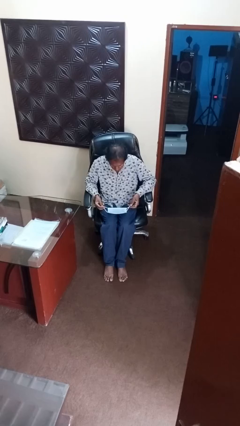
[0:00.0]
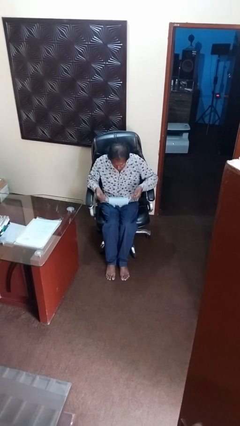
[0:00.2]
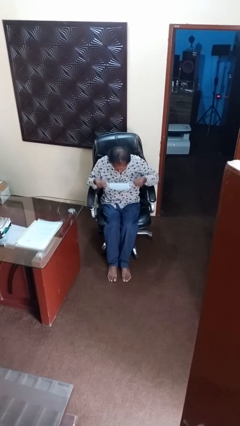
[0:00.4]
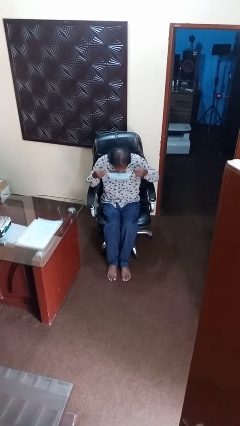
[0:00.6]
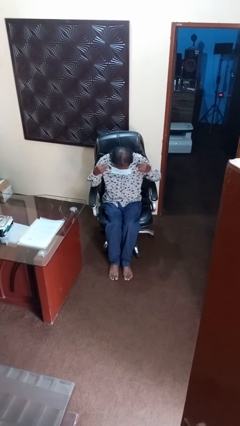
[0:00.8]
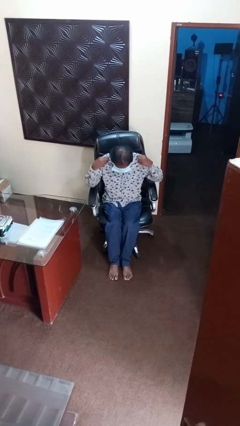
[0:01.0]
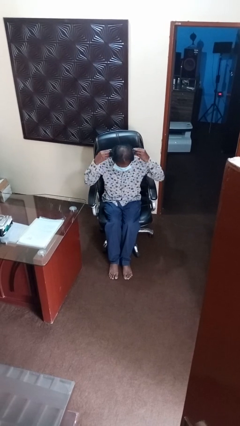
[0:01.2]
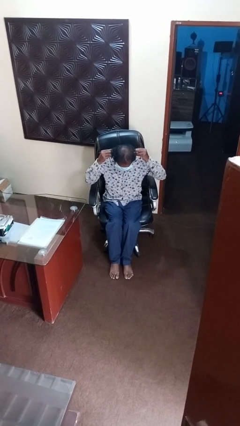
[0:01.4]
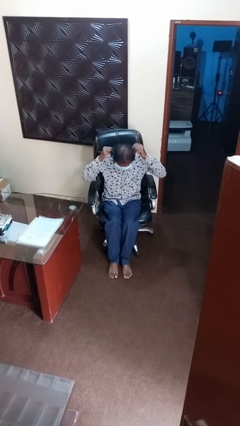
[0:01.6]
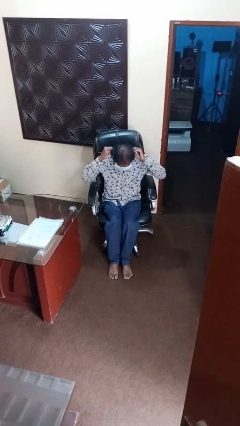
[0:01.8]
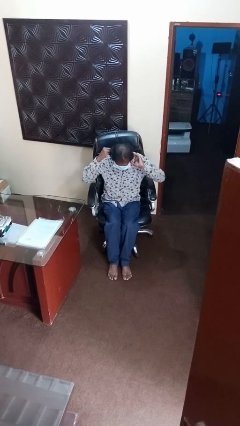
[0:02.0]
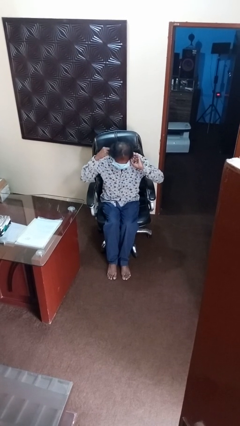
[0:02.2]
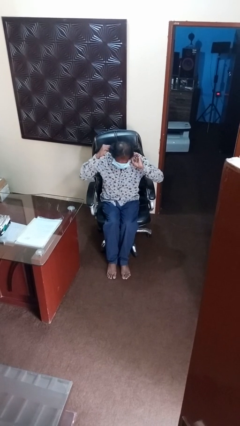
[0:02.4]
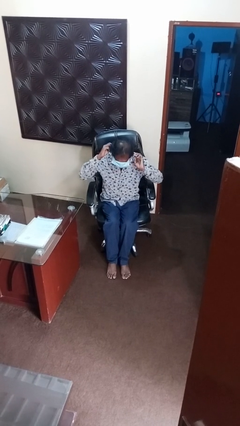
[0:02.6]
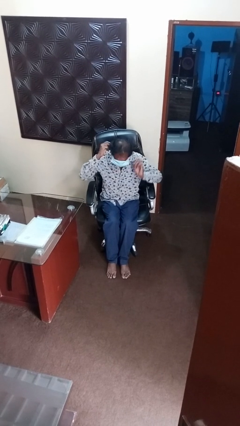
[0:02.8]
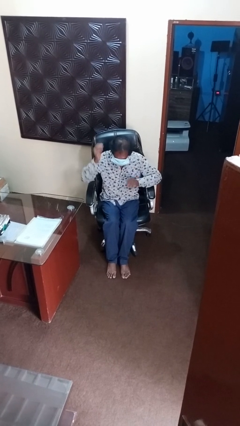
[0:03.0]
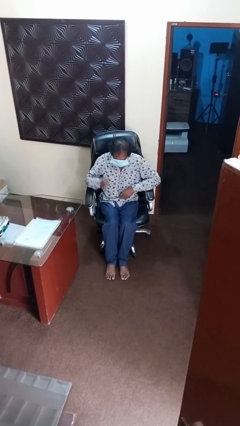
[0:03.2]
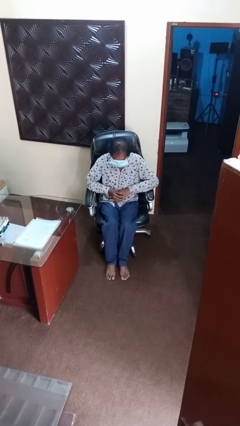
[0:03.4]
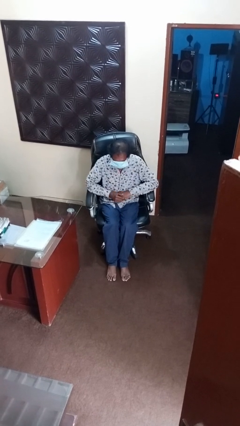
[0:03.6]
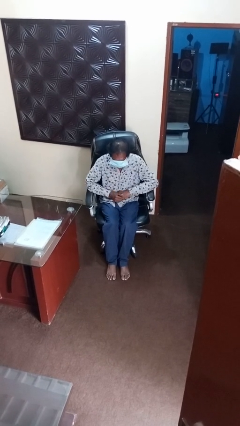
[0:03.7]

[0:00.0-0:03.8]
person puts on facemask

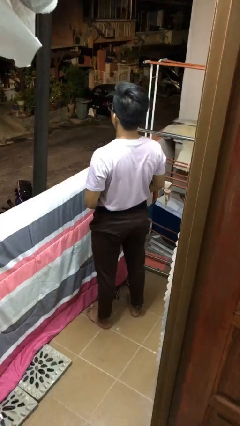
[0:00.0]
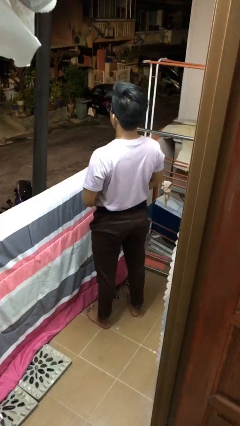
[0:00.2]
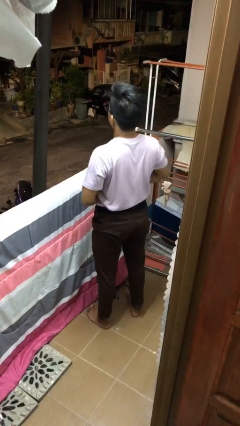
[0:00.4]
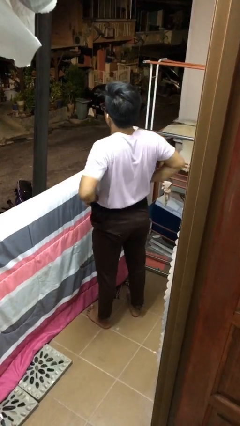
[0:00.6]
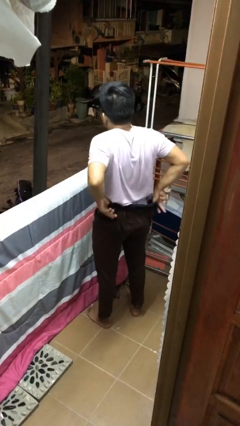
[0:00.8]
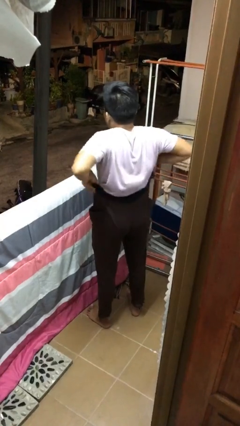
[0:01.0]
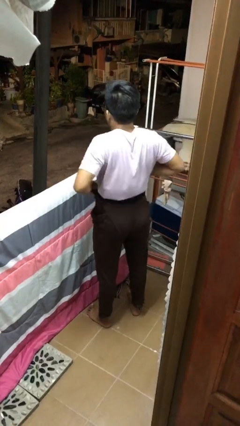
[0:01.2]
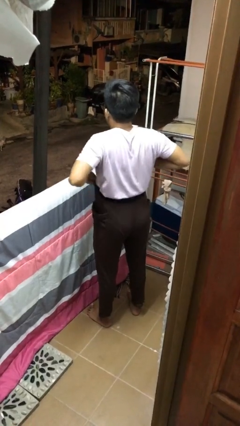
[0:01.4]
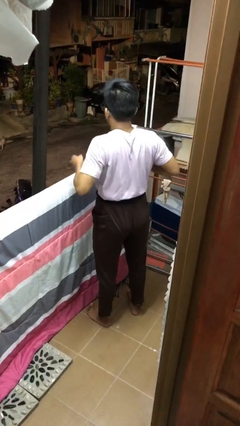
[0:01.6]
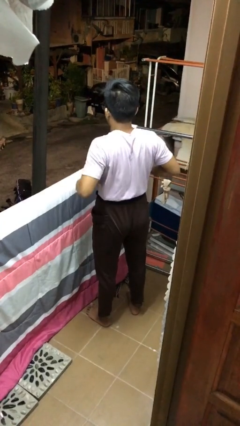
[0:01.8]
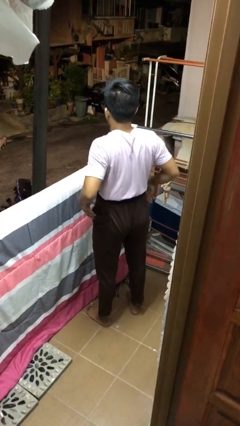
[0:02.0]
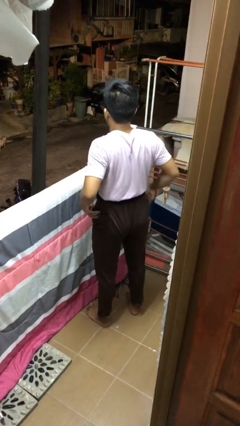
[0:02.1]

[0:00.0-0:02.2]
person hikes up pants

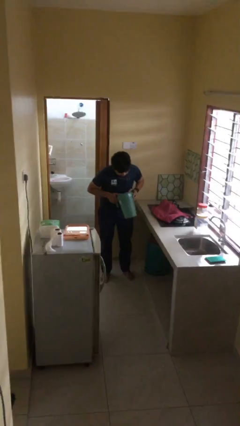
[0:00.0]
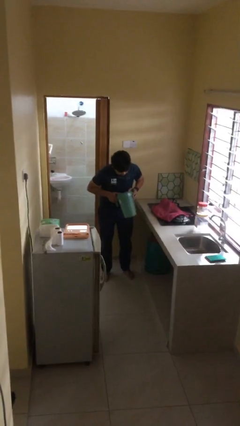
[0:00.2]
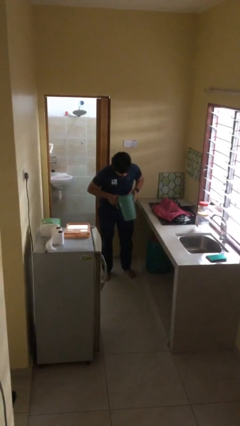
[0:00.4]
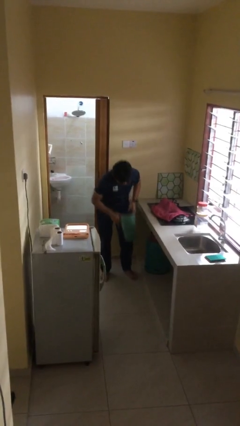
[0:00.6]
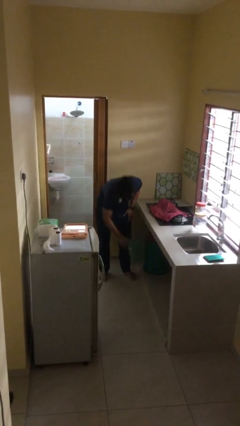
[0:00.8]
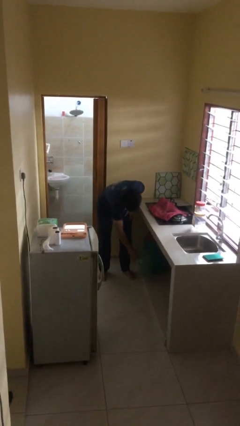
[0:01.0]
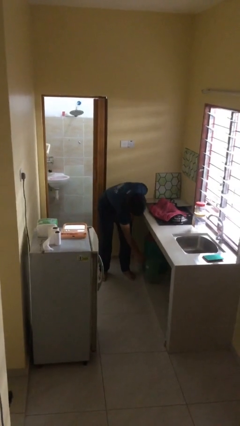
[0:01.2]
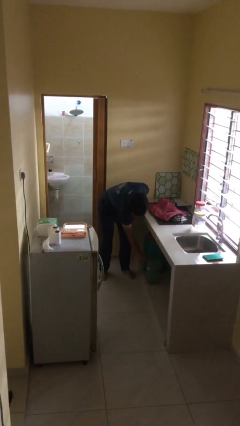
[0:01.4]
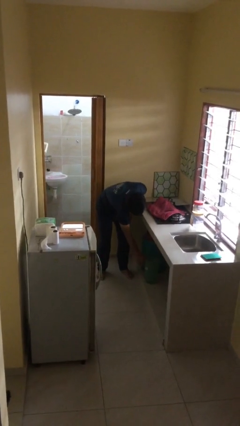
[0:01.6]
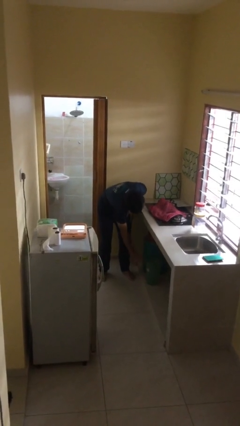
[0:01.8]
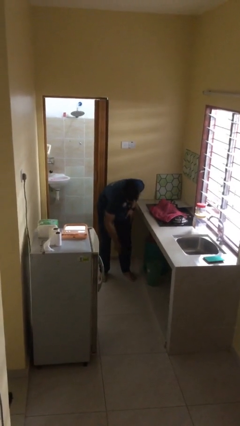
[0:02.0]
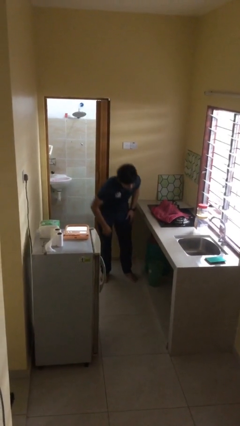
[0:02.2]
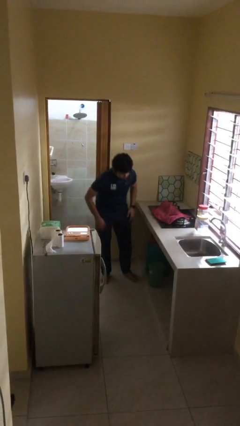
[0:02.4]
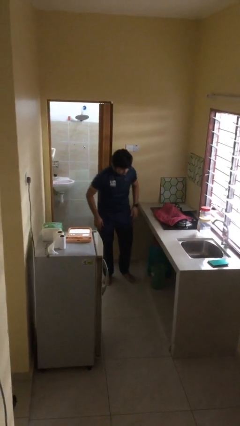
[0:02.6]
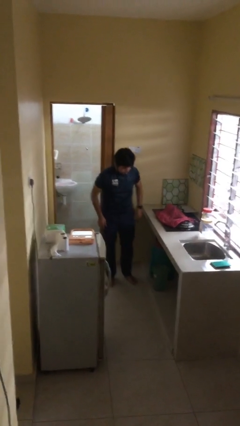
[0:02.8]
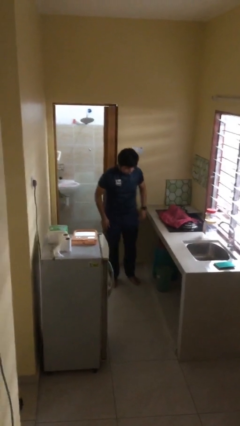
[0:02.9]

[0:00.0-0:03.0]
person puts down object into cabinet

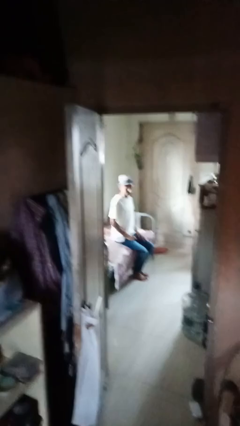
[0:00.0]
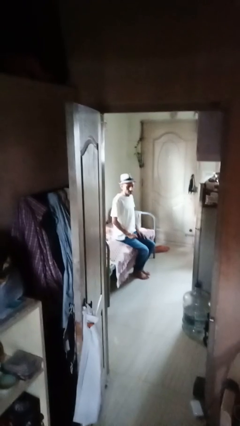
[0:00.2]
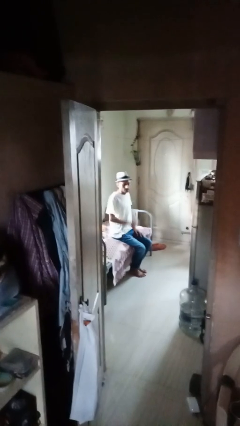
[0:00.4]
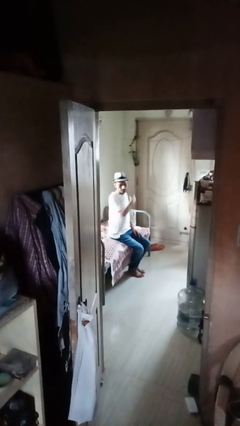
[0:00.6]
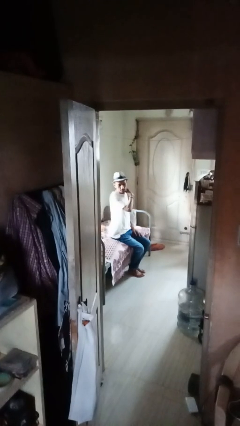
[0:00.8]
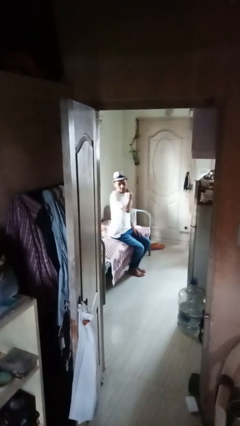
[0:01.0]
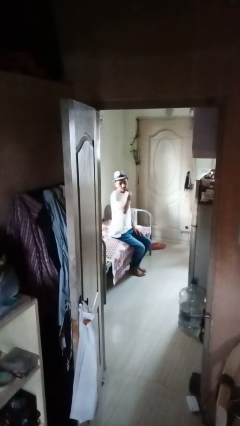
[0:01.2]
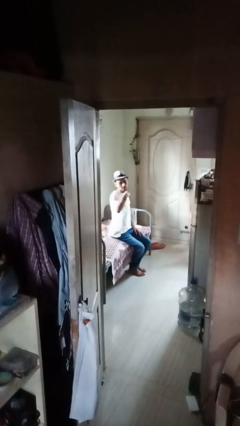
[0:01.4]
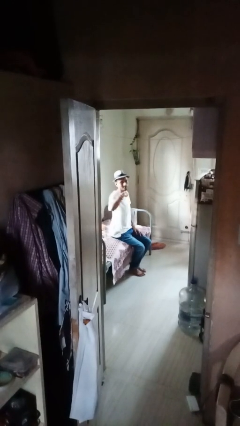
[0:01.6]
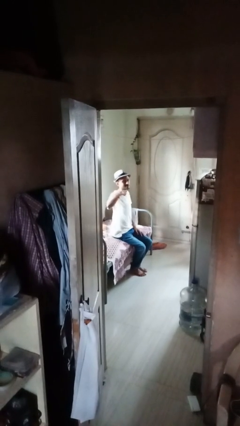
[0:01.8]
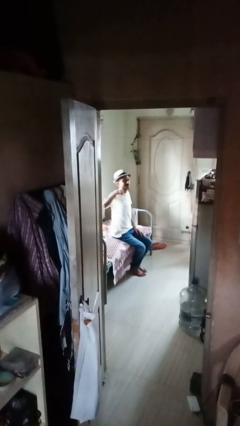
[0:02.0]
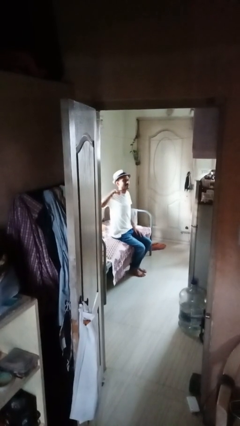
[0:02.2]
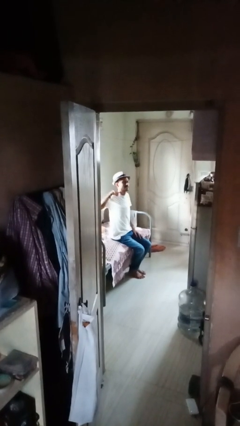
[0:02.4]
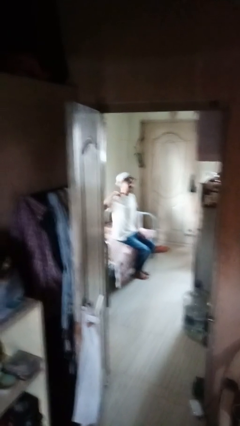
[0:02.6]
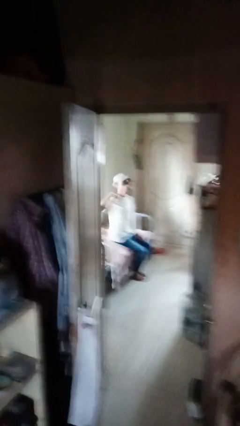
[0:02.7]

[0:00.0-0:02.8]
person gestures cut

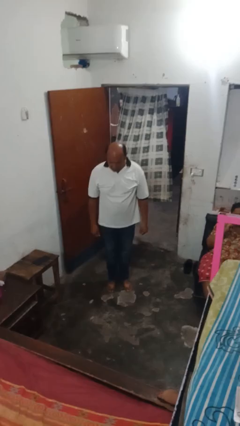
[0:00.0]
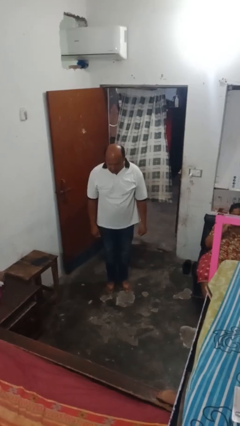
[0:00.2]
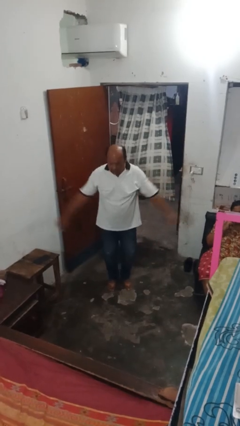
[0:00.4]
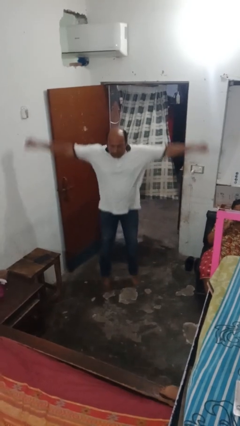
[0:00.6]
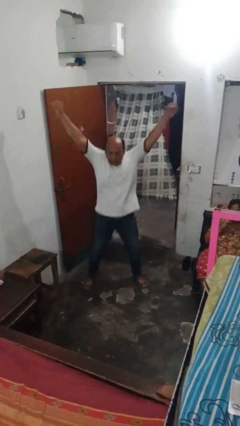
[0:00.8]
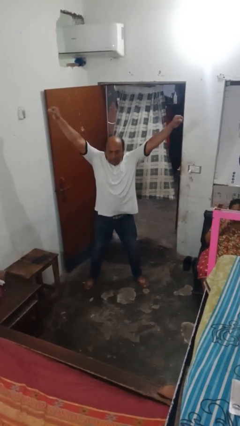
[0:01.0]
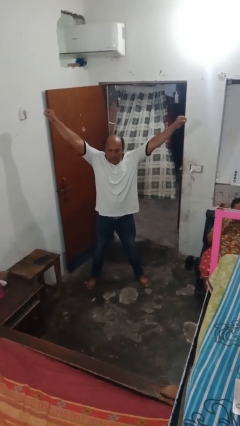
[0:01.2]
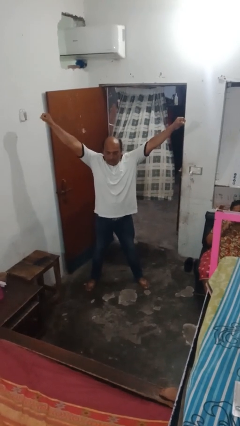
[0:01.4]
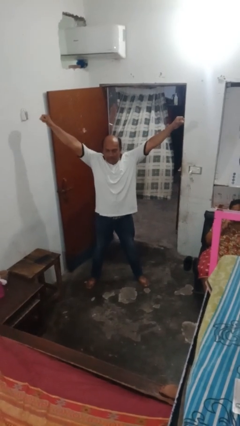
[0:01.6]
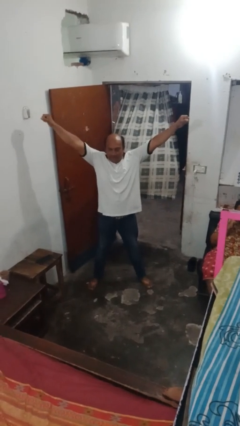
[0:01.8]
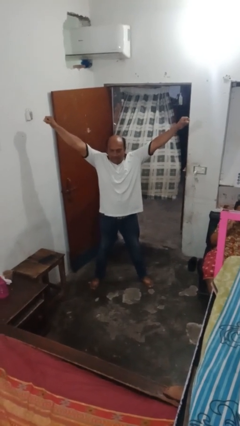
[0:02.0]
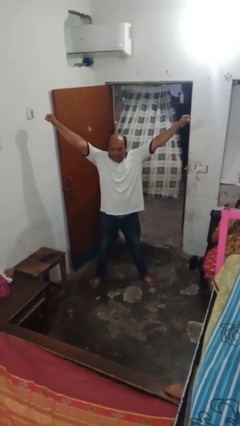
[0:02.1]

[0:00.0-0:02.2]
person exercises with jumping jacks

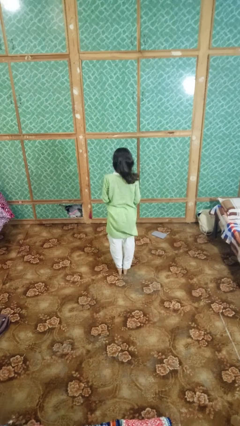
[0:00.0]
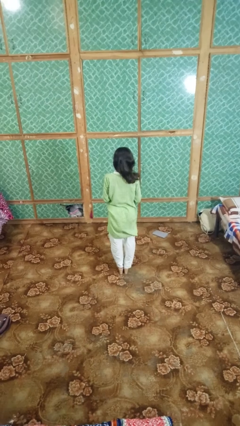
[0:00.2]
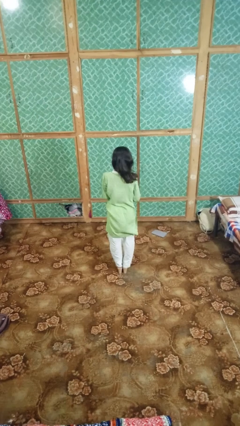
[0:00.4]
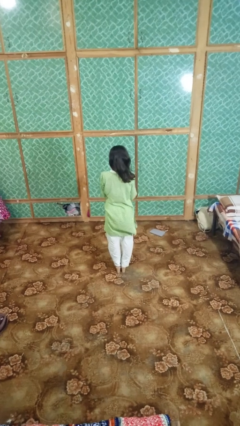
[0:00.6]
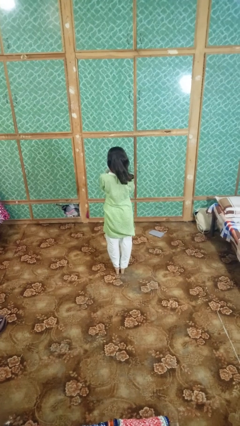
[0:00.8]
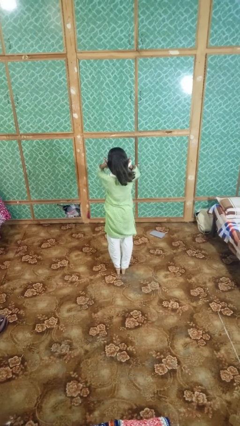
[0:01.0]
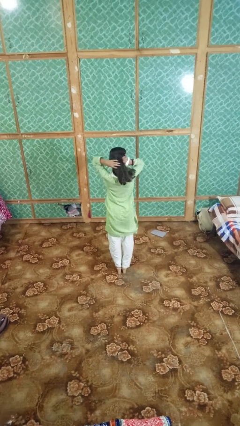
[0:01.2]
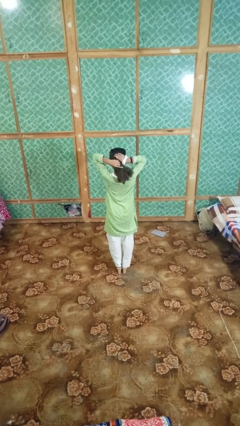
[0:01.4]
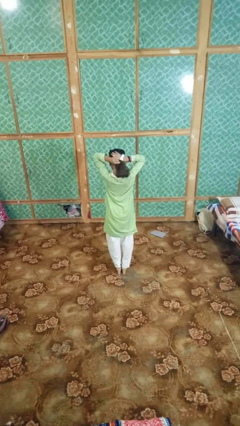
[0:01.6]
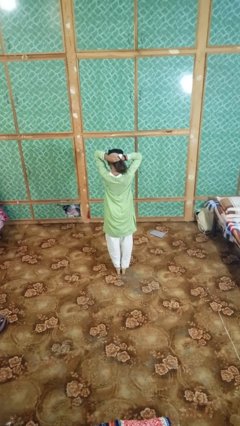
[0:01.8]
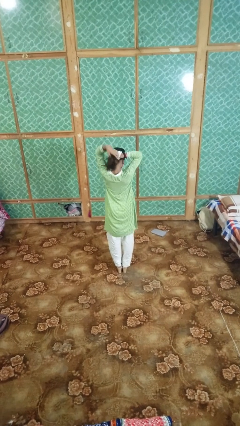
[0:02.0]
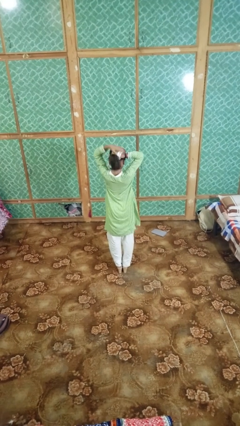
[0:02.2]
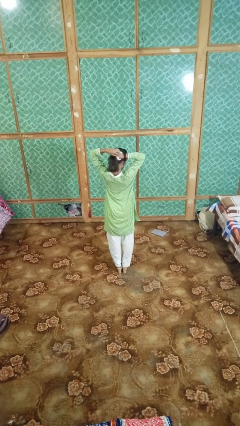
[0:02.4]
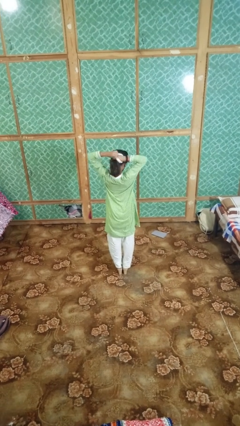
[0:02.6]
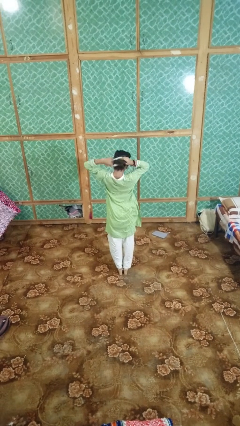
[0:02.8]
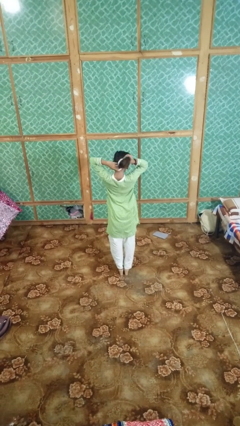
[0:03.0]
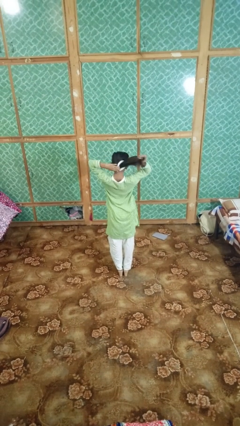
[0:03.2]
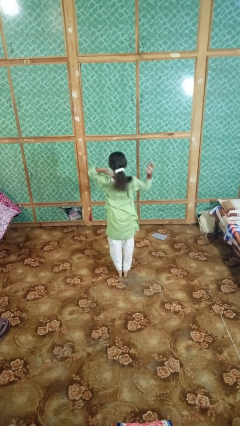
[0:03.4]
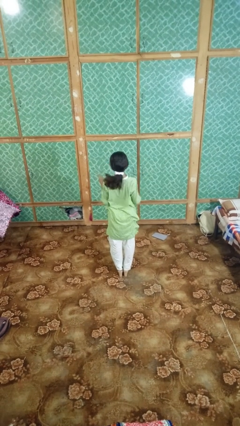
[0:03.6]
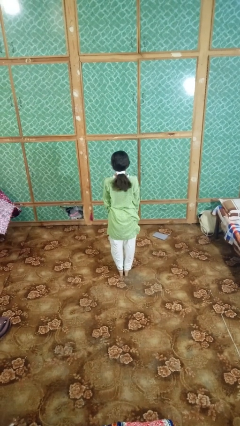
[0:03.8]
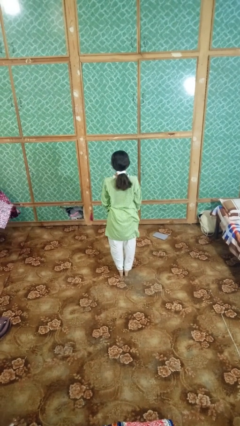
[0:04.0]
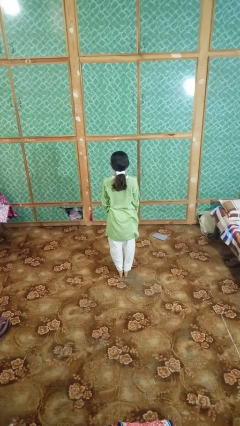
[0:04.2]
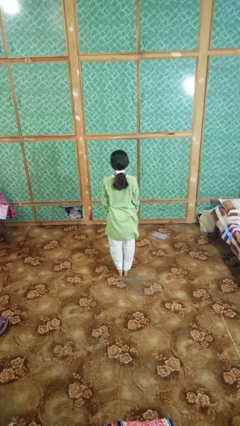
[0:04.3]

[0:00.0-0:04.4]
person puts hair in ponytail
